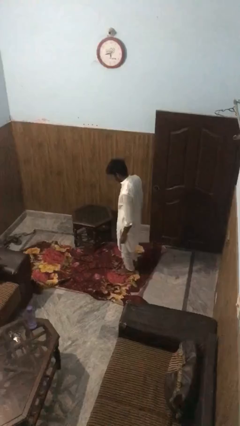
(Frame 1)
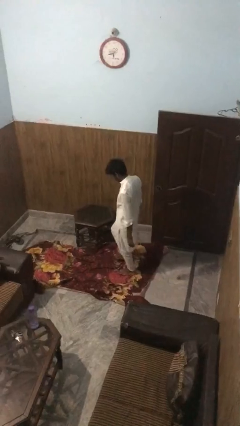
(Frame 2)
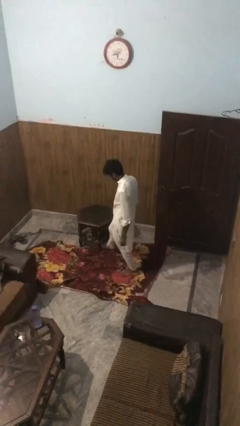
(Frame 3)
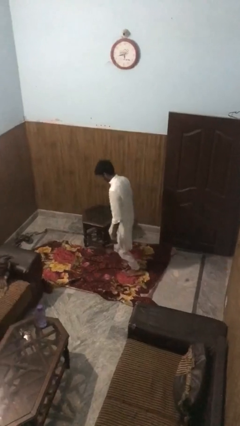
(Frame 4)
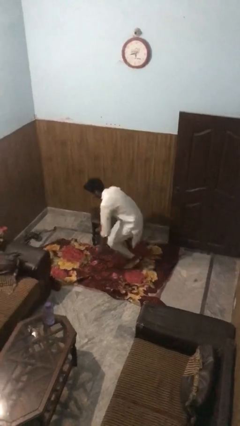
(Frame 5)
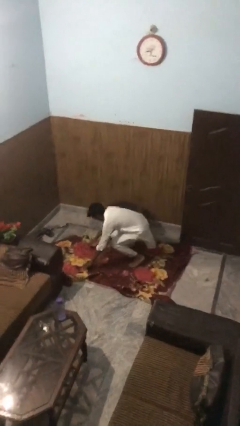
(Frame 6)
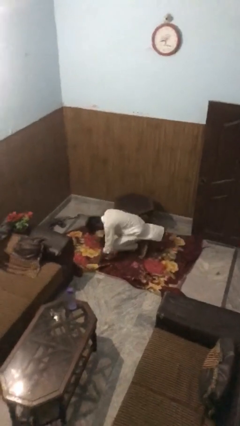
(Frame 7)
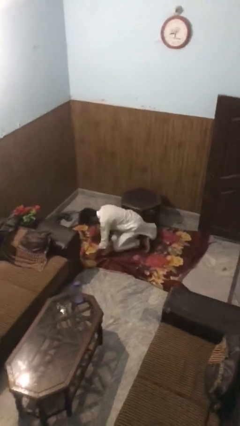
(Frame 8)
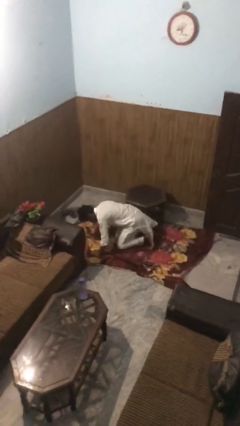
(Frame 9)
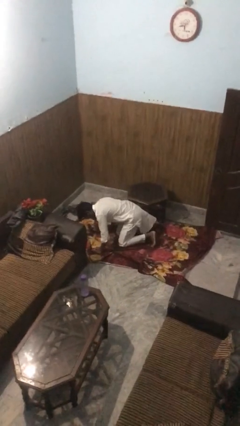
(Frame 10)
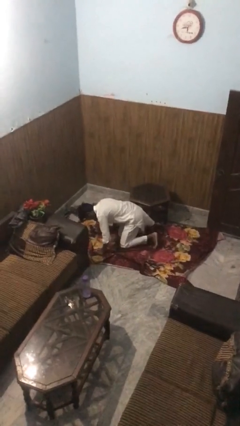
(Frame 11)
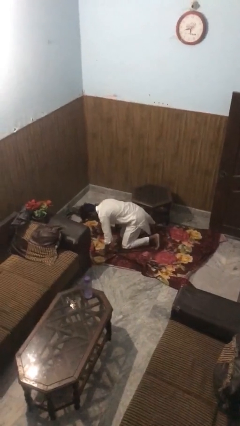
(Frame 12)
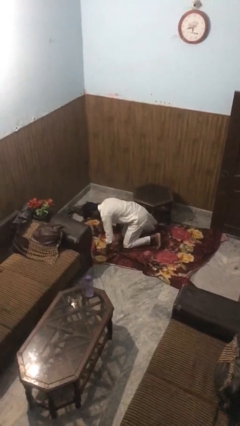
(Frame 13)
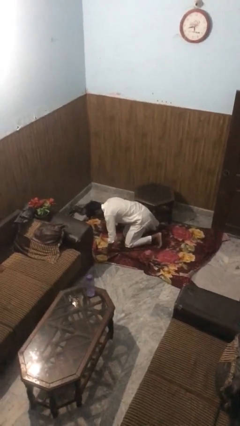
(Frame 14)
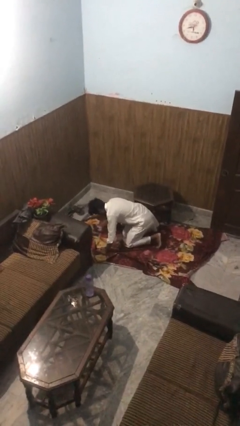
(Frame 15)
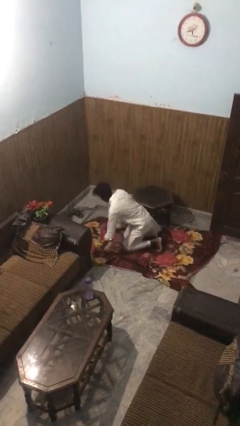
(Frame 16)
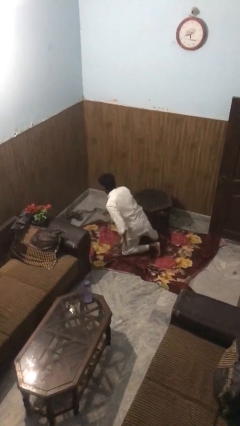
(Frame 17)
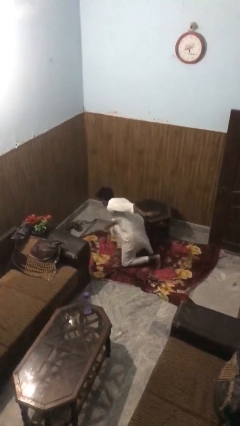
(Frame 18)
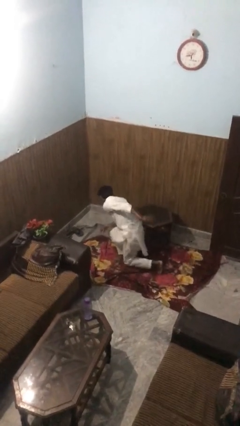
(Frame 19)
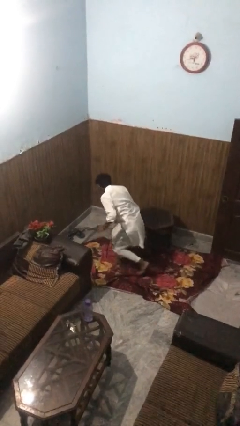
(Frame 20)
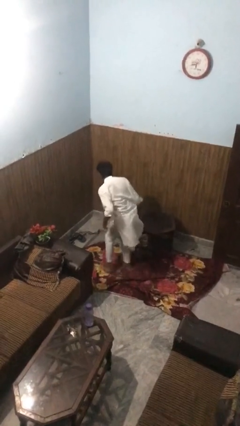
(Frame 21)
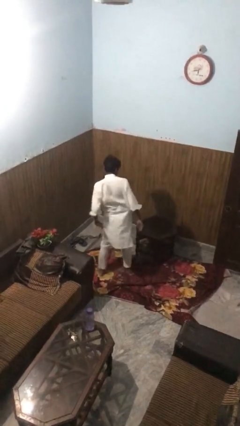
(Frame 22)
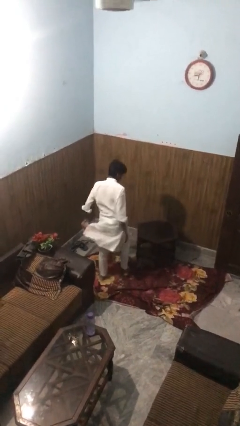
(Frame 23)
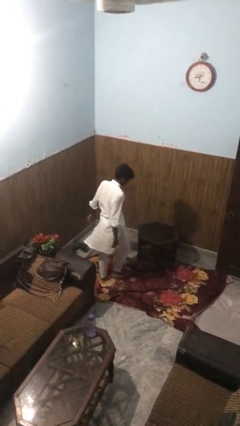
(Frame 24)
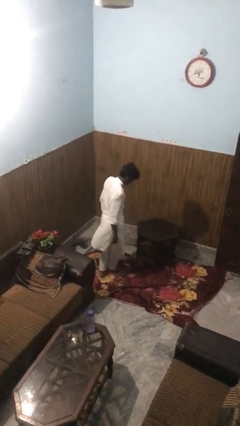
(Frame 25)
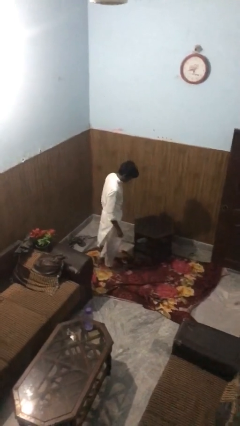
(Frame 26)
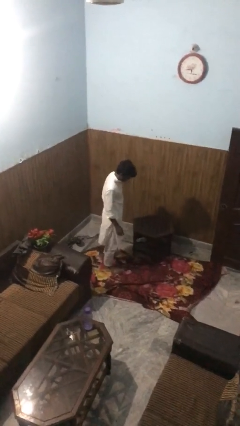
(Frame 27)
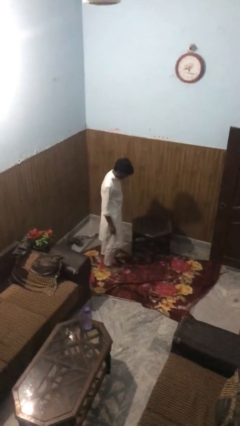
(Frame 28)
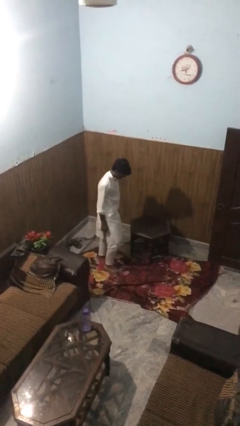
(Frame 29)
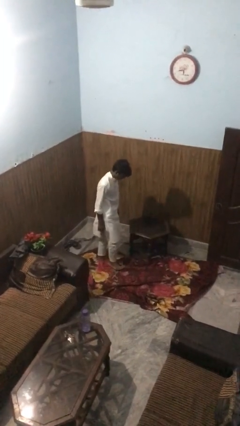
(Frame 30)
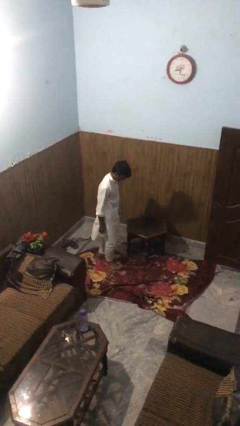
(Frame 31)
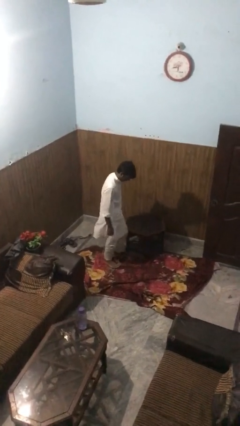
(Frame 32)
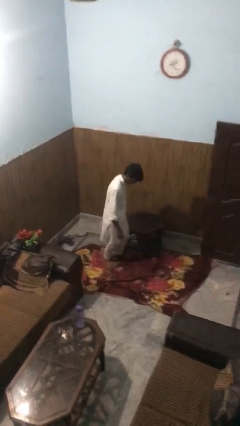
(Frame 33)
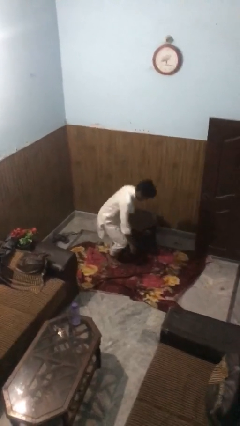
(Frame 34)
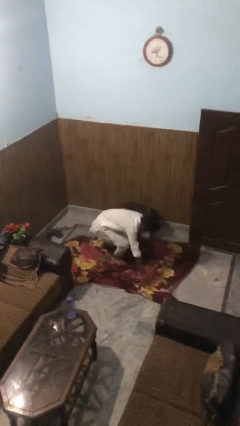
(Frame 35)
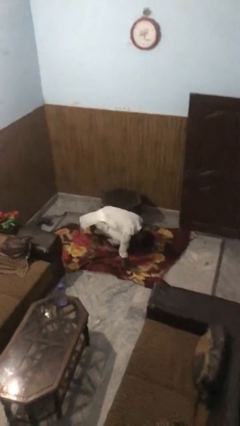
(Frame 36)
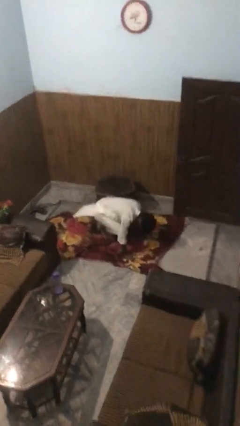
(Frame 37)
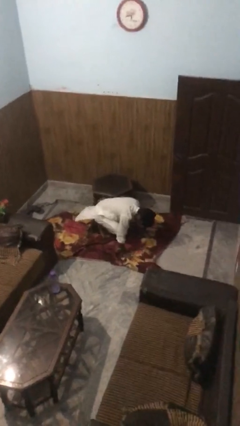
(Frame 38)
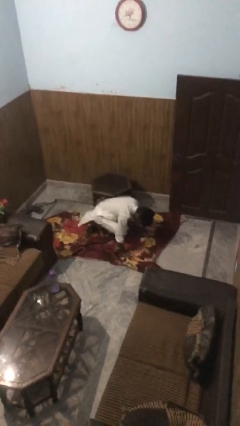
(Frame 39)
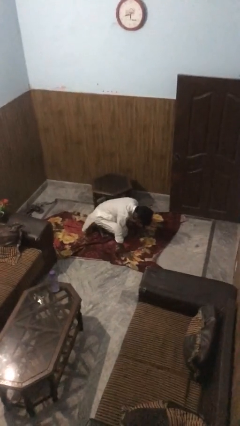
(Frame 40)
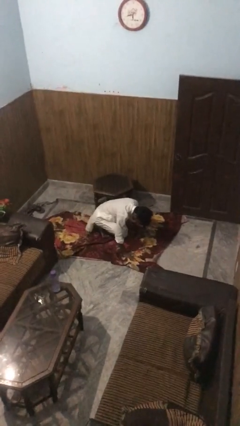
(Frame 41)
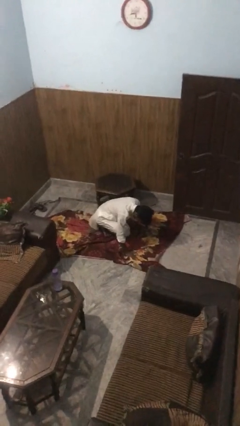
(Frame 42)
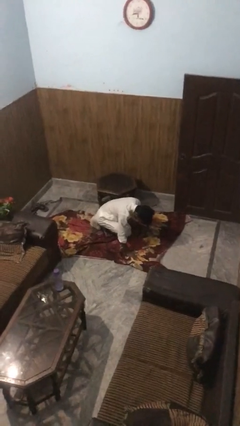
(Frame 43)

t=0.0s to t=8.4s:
person bumps into table

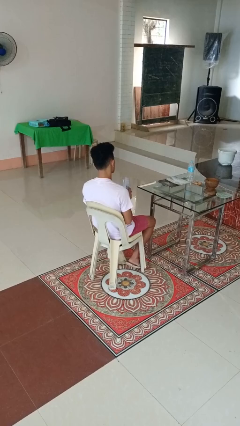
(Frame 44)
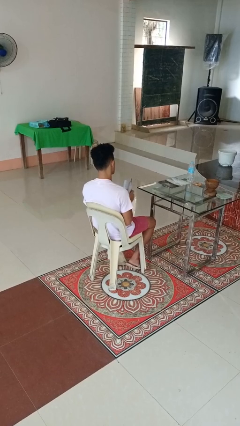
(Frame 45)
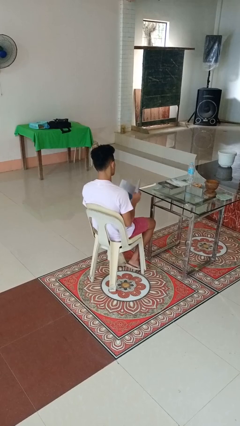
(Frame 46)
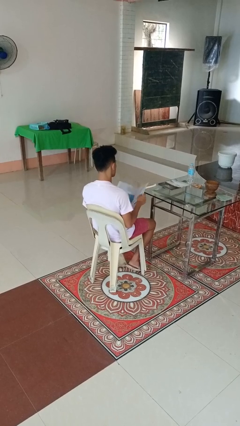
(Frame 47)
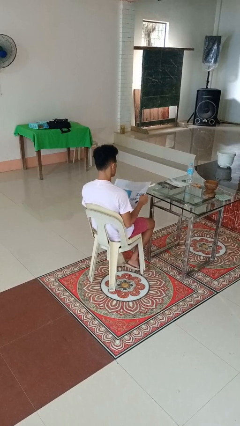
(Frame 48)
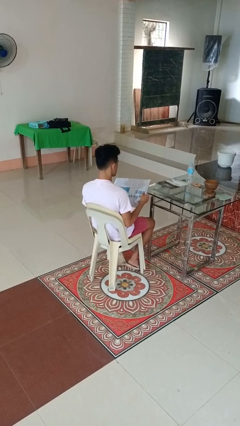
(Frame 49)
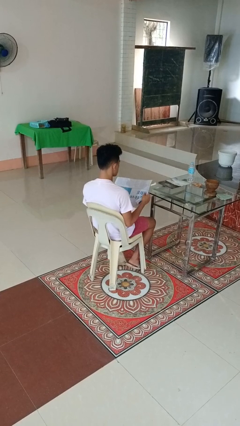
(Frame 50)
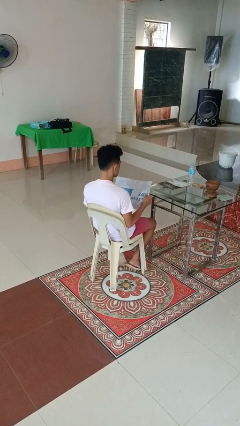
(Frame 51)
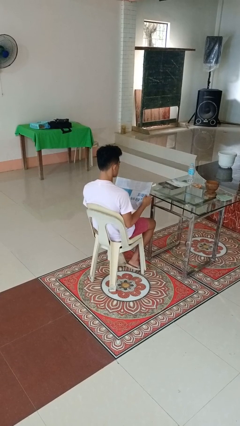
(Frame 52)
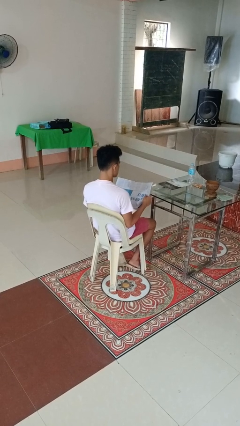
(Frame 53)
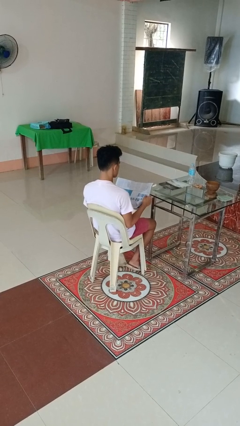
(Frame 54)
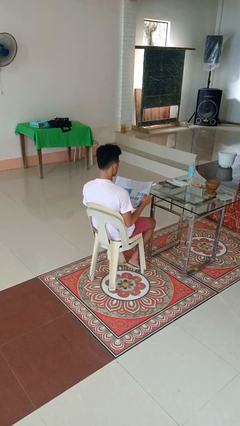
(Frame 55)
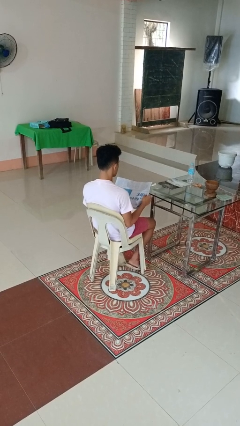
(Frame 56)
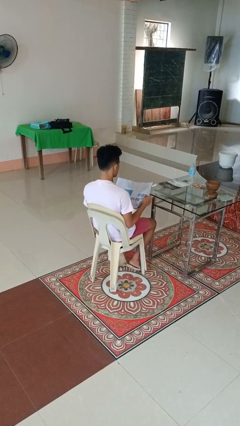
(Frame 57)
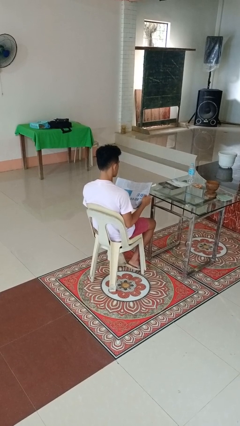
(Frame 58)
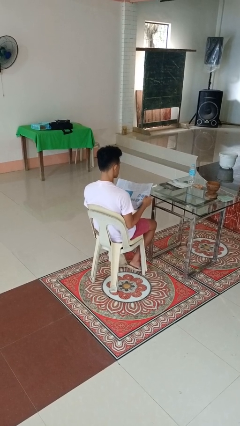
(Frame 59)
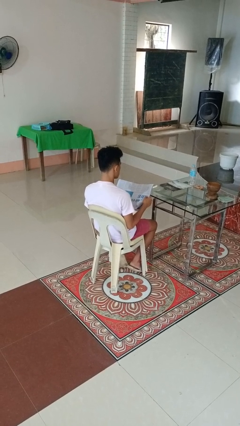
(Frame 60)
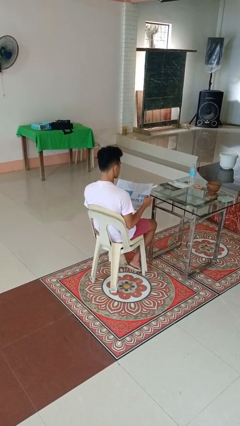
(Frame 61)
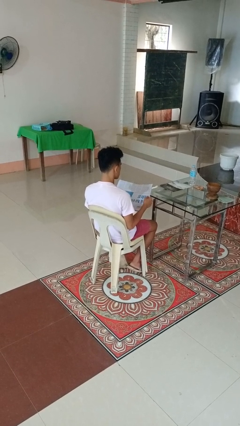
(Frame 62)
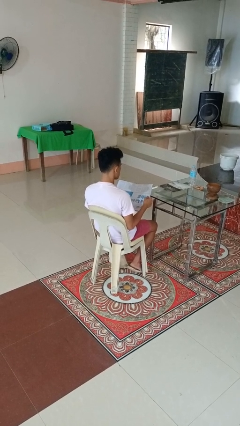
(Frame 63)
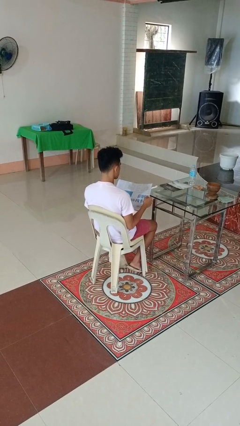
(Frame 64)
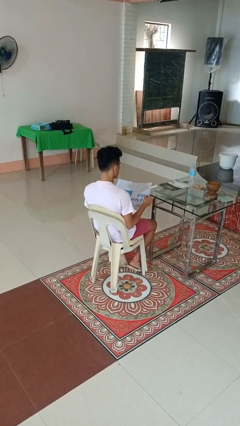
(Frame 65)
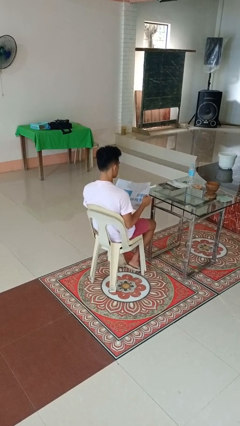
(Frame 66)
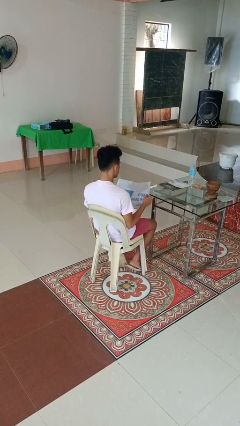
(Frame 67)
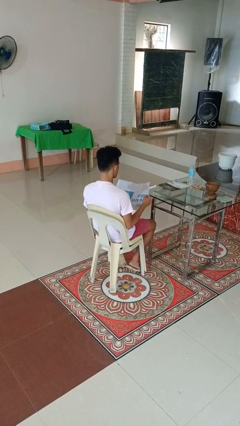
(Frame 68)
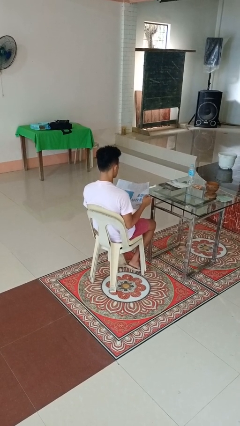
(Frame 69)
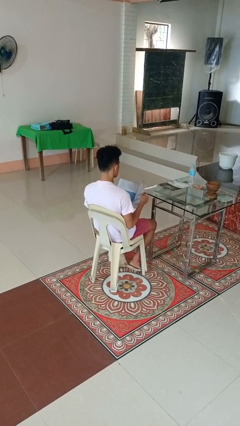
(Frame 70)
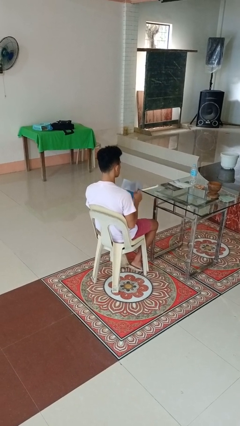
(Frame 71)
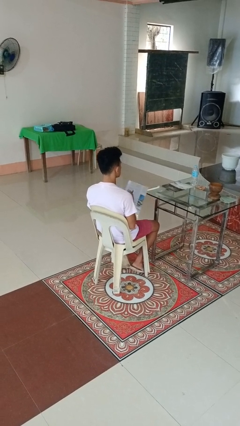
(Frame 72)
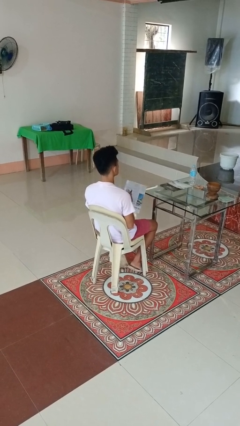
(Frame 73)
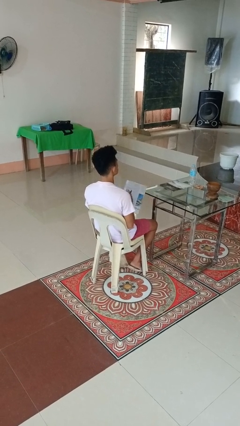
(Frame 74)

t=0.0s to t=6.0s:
person reads newspaper

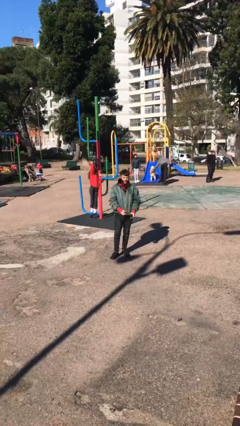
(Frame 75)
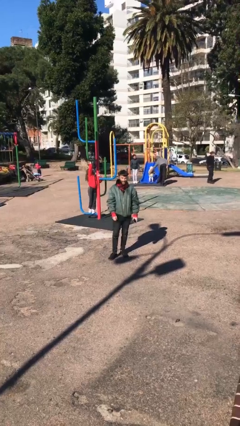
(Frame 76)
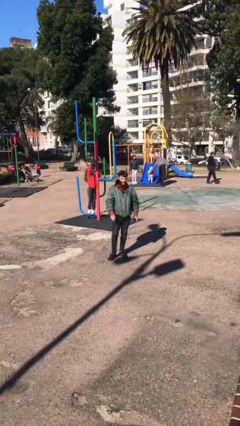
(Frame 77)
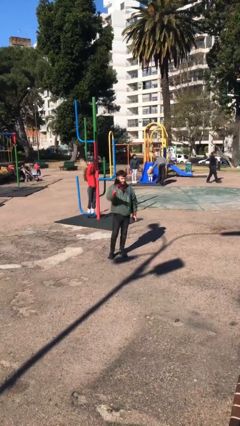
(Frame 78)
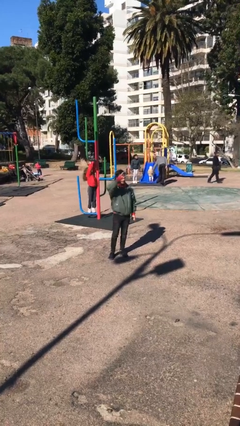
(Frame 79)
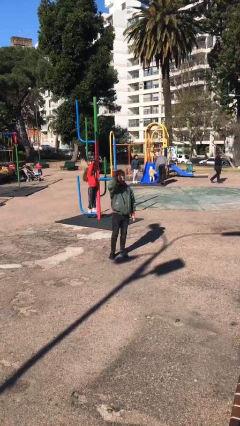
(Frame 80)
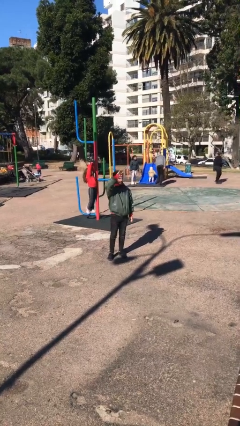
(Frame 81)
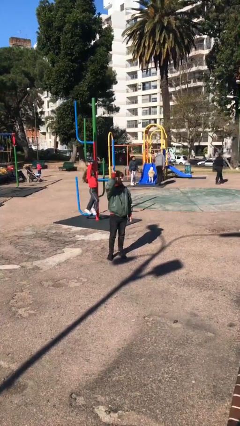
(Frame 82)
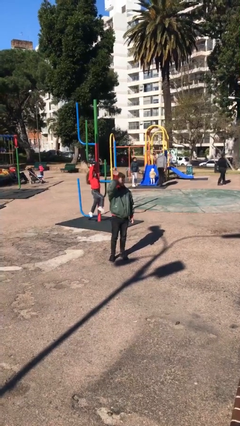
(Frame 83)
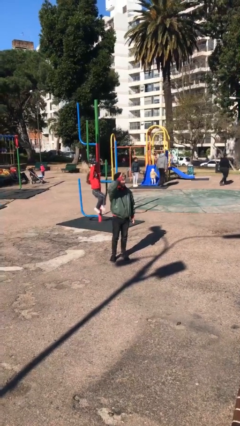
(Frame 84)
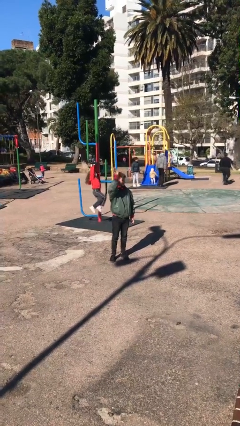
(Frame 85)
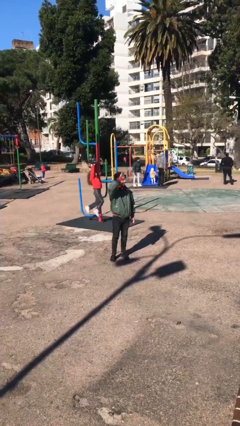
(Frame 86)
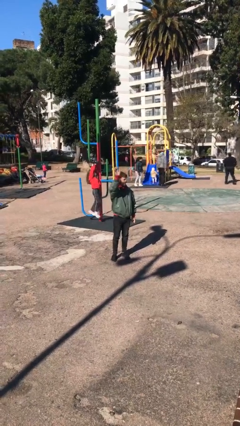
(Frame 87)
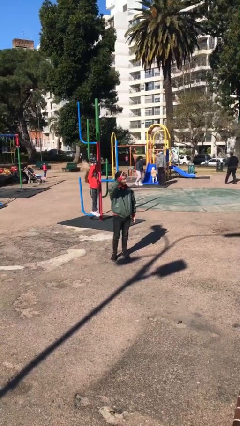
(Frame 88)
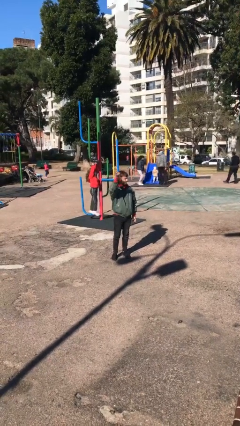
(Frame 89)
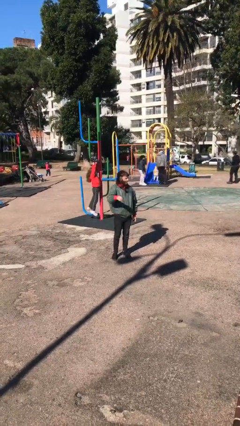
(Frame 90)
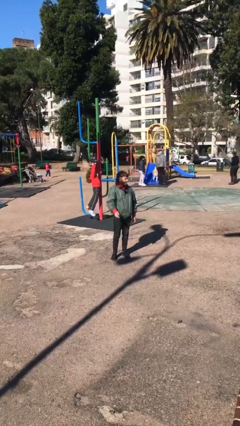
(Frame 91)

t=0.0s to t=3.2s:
person waves at person

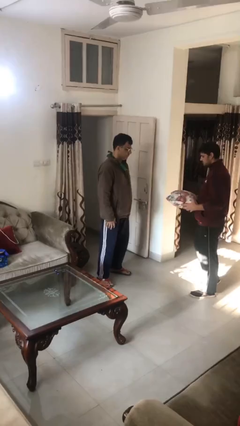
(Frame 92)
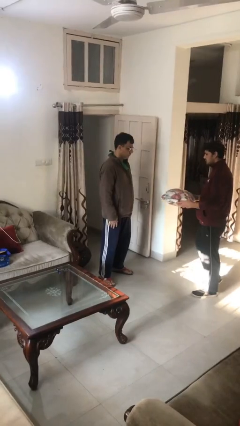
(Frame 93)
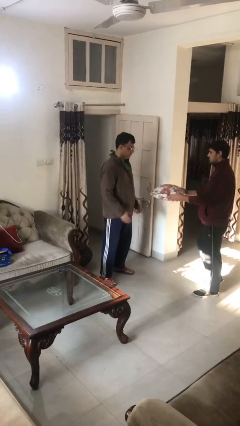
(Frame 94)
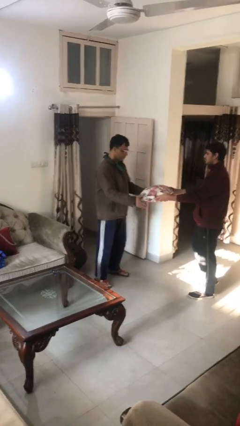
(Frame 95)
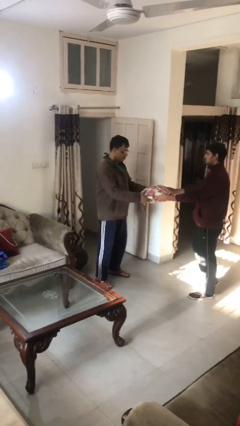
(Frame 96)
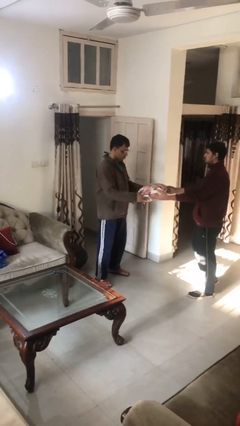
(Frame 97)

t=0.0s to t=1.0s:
person transfers object to person
